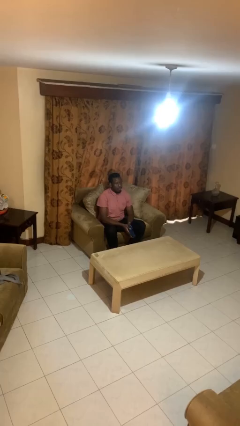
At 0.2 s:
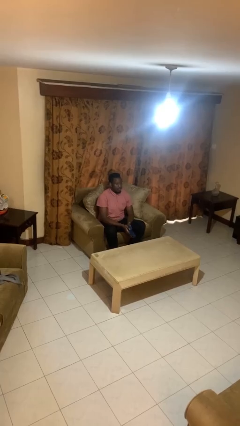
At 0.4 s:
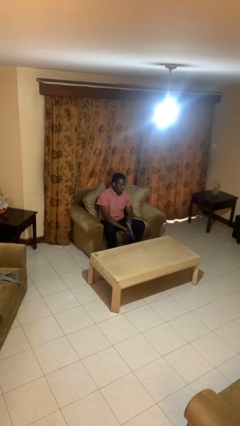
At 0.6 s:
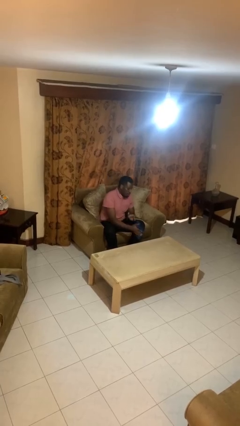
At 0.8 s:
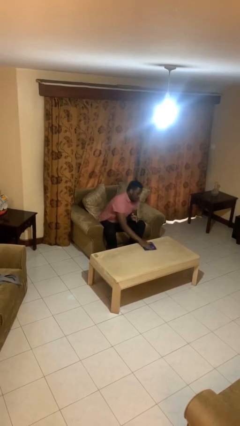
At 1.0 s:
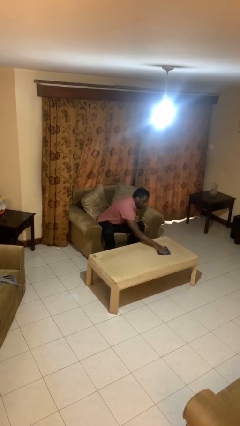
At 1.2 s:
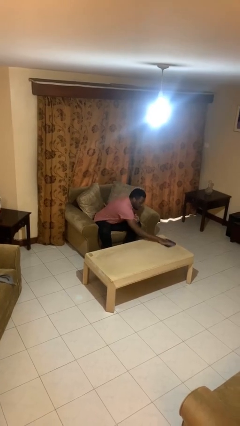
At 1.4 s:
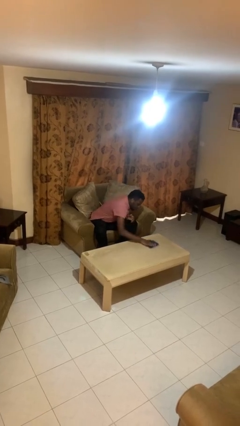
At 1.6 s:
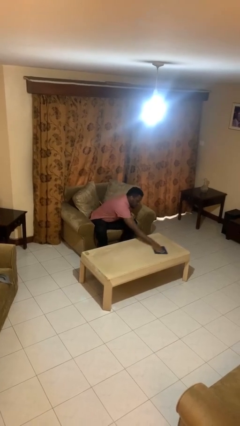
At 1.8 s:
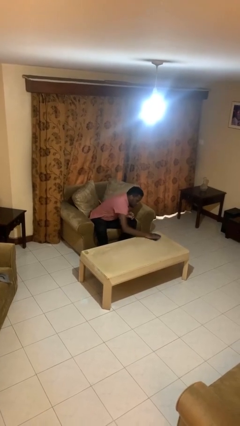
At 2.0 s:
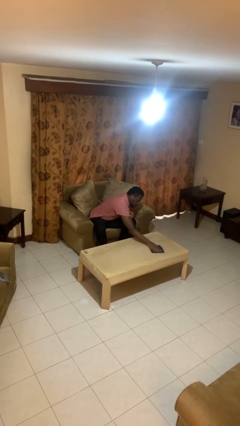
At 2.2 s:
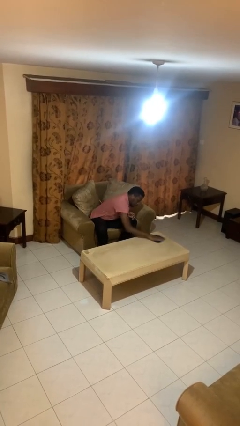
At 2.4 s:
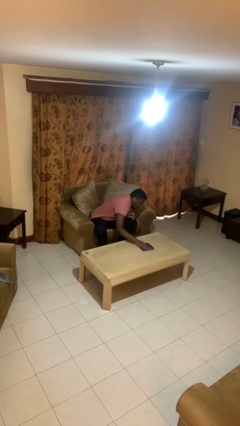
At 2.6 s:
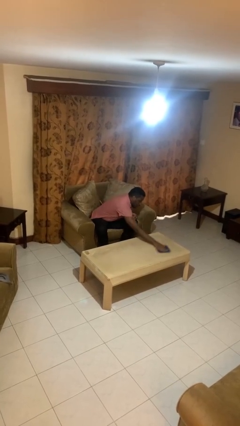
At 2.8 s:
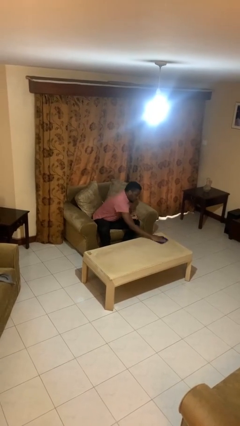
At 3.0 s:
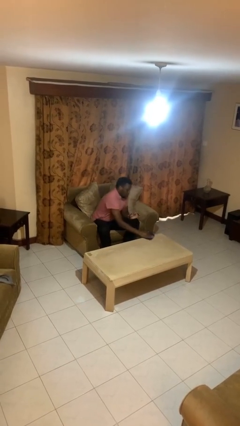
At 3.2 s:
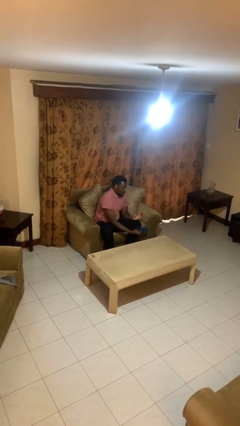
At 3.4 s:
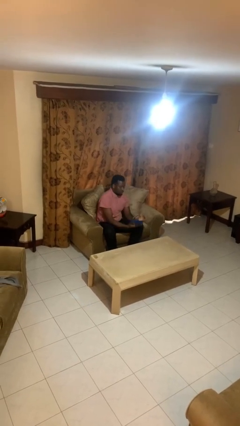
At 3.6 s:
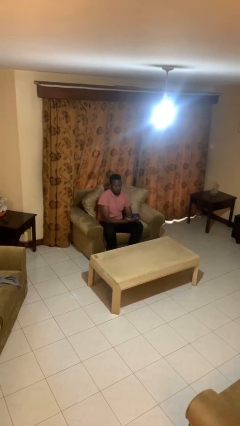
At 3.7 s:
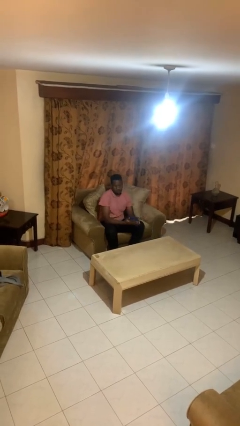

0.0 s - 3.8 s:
person cleans table with rag

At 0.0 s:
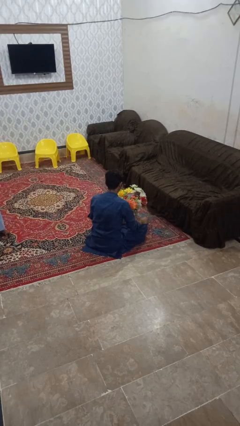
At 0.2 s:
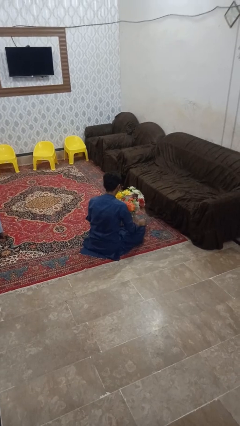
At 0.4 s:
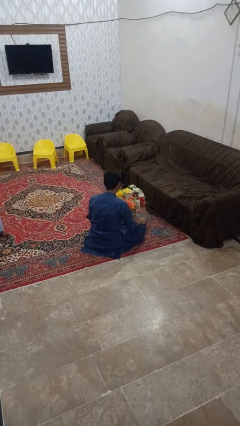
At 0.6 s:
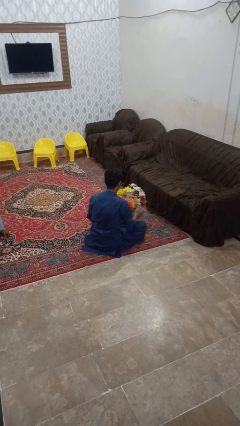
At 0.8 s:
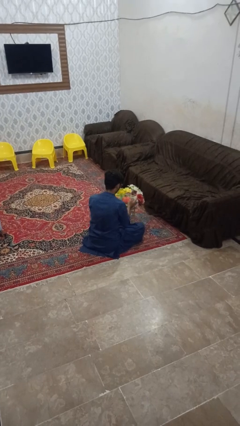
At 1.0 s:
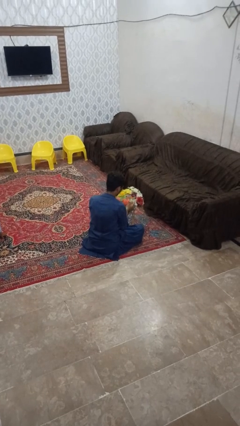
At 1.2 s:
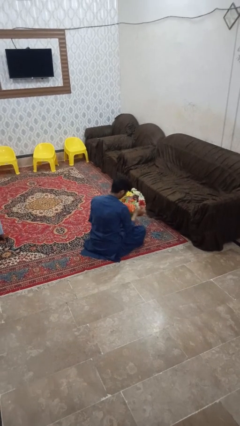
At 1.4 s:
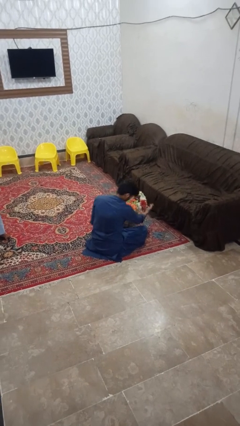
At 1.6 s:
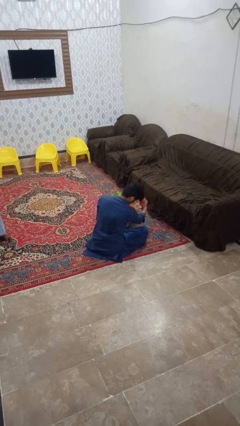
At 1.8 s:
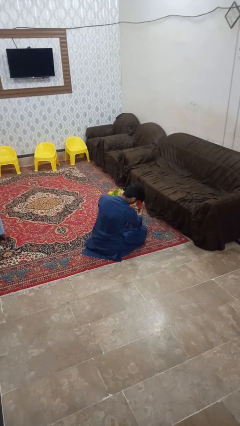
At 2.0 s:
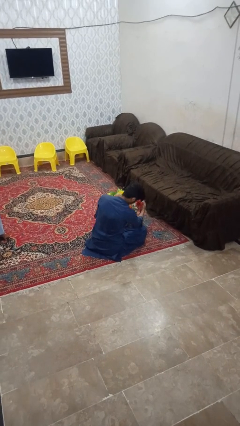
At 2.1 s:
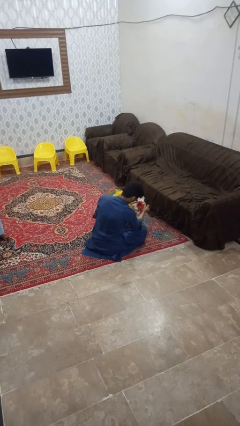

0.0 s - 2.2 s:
person arranges flowers in vase

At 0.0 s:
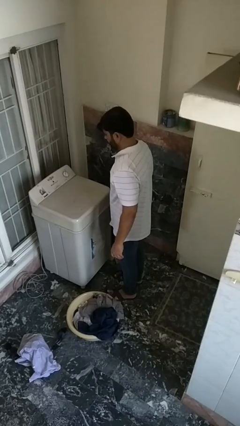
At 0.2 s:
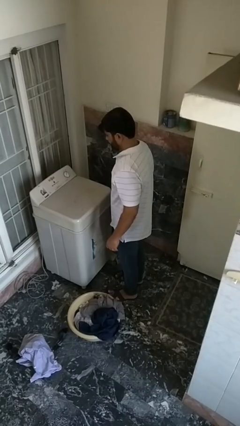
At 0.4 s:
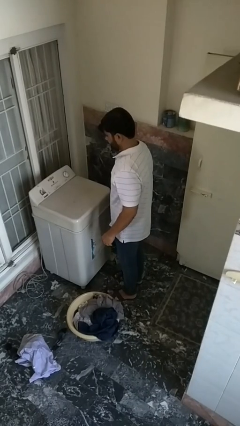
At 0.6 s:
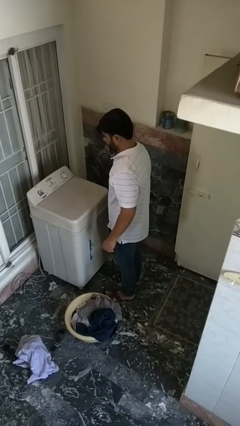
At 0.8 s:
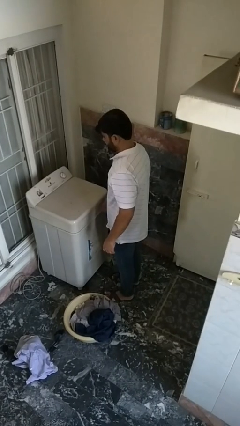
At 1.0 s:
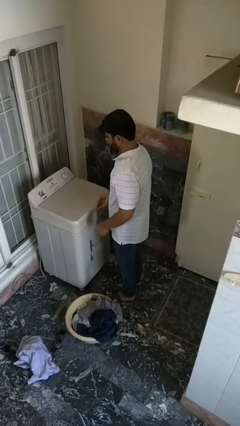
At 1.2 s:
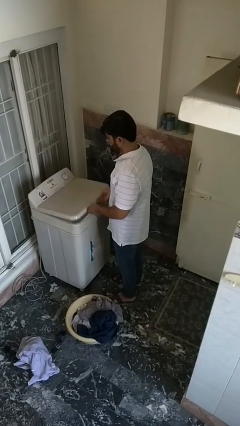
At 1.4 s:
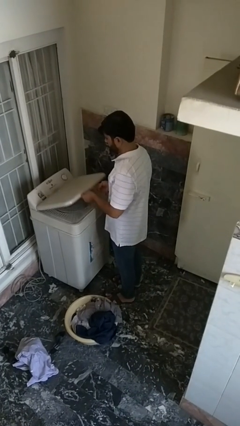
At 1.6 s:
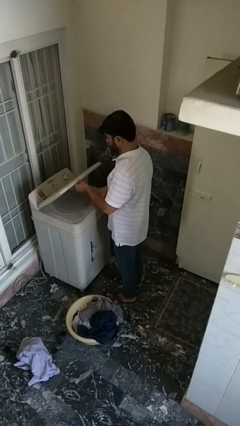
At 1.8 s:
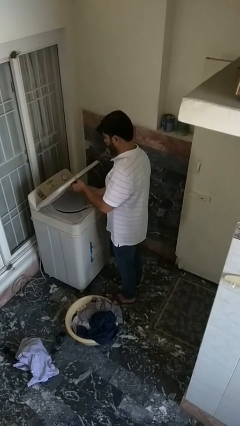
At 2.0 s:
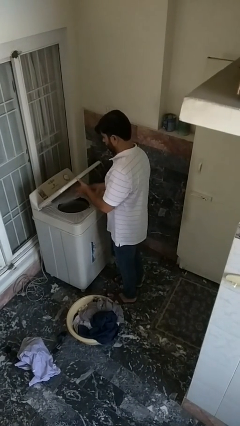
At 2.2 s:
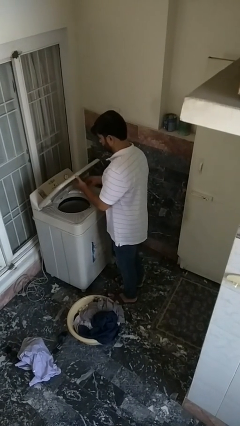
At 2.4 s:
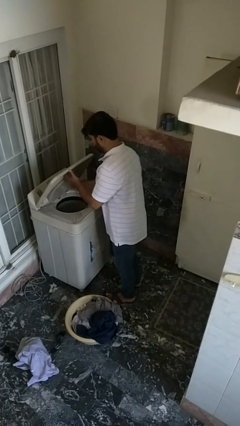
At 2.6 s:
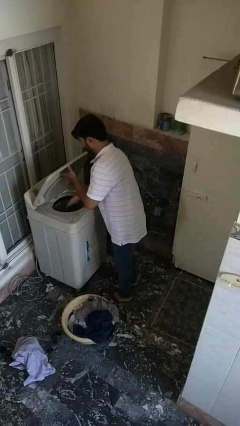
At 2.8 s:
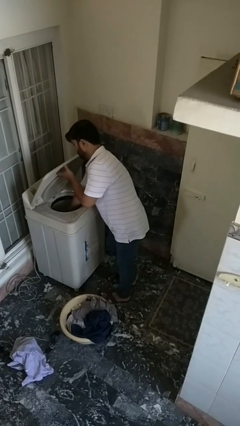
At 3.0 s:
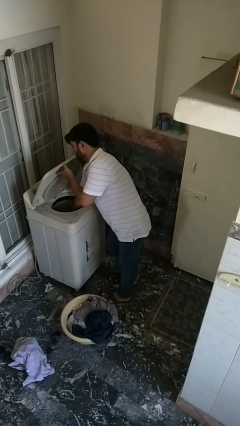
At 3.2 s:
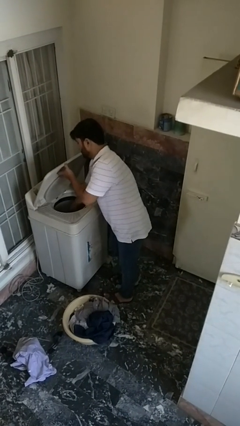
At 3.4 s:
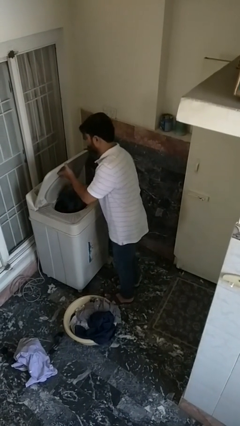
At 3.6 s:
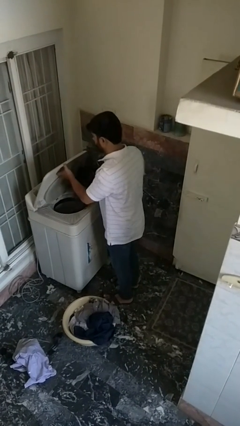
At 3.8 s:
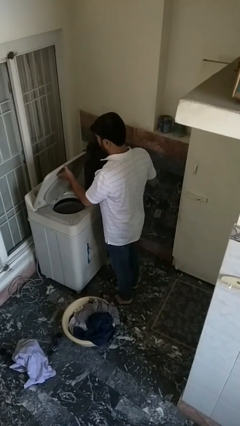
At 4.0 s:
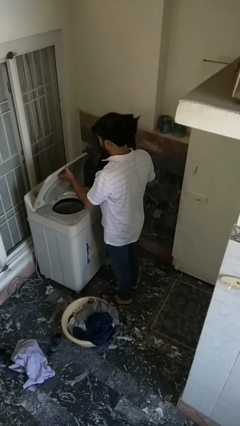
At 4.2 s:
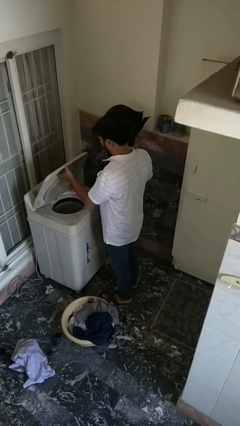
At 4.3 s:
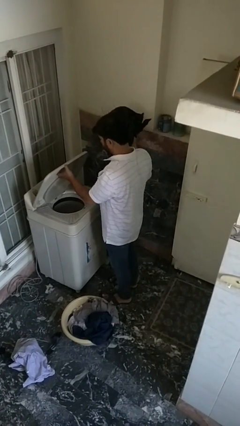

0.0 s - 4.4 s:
person unloads dryer

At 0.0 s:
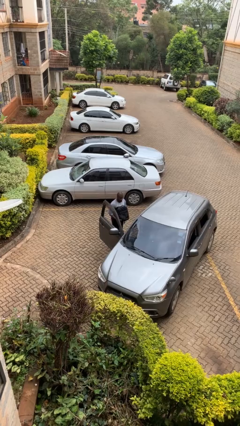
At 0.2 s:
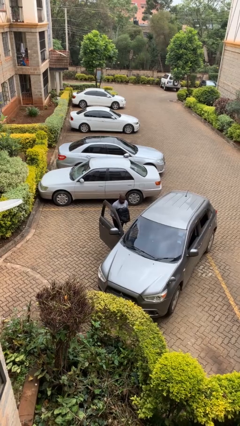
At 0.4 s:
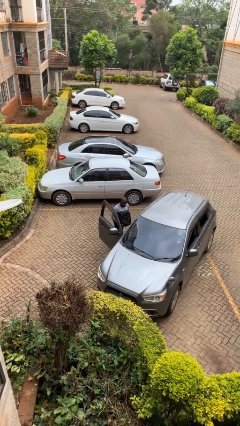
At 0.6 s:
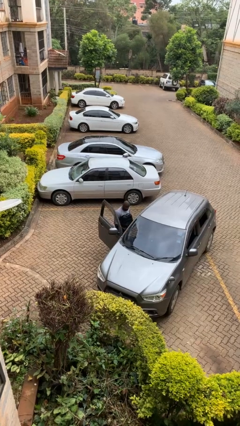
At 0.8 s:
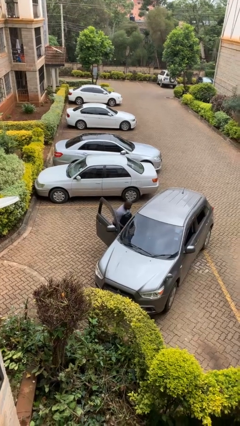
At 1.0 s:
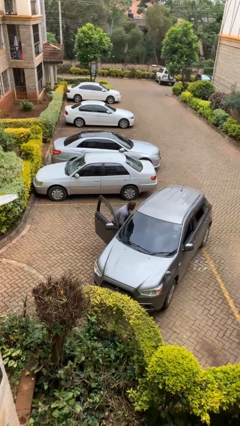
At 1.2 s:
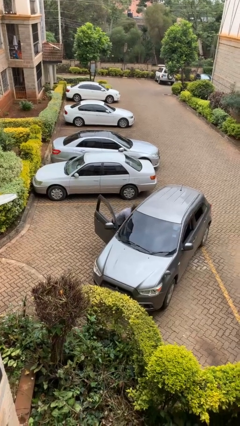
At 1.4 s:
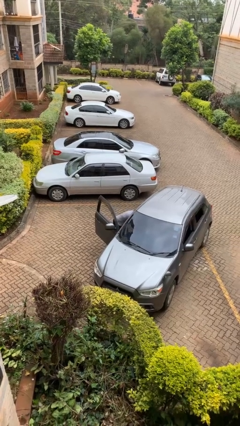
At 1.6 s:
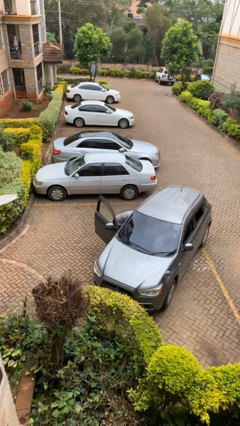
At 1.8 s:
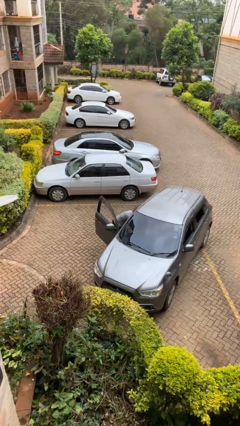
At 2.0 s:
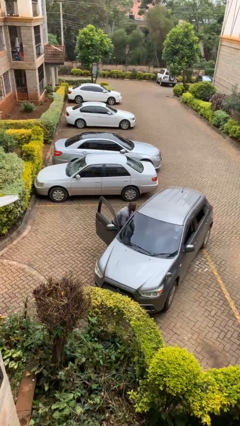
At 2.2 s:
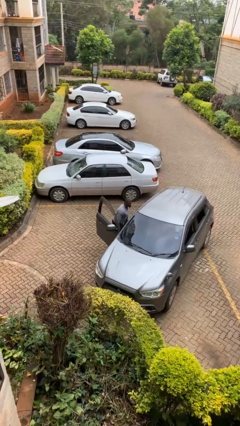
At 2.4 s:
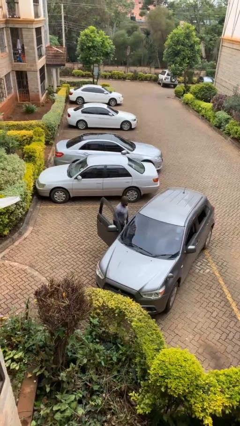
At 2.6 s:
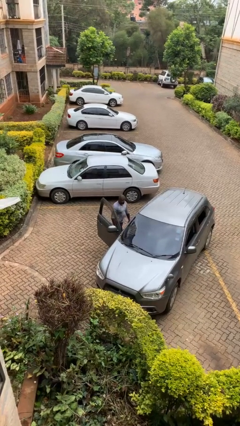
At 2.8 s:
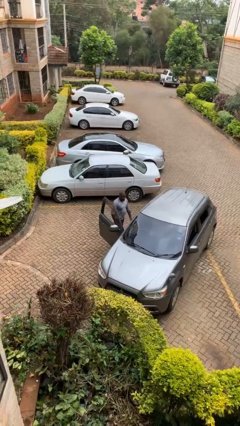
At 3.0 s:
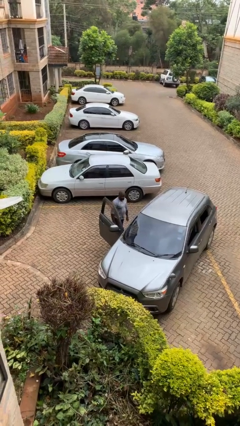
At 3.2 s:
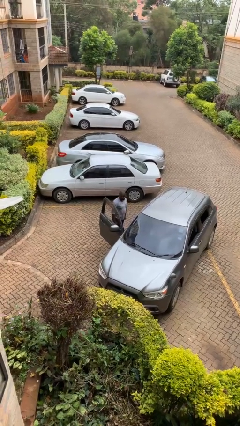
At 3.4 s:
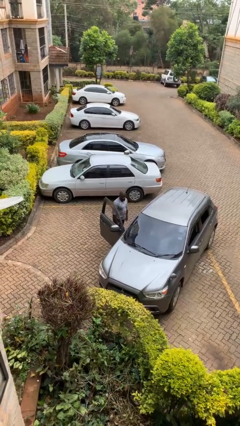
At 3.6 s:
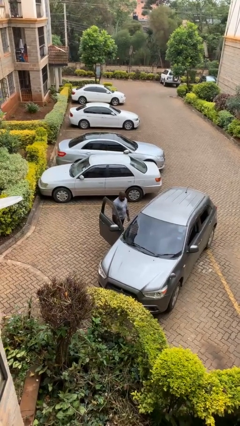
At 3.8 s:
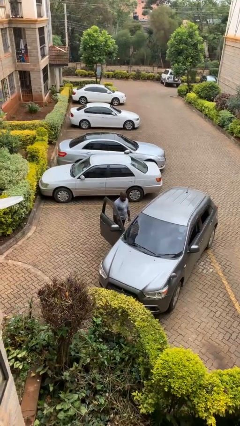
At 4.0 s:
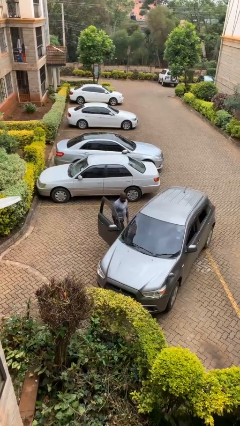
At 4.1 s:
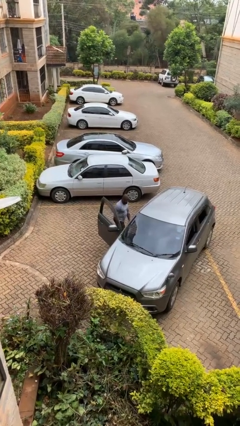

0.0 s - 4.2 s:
person loads car

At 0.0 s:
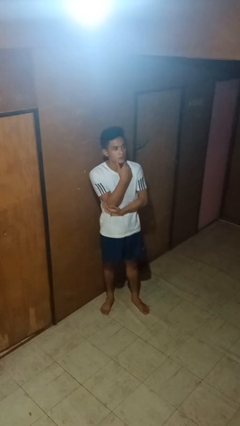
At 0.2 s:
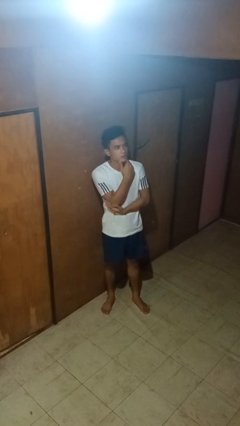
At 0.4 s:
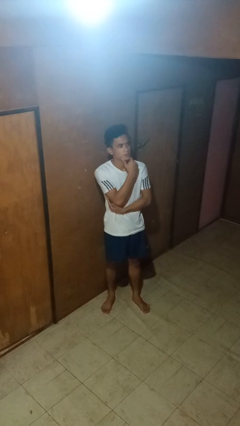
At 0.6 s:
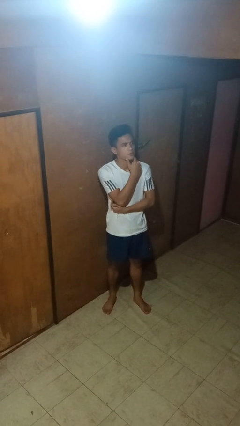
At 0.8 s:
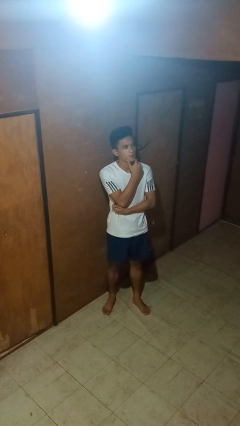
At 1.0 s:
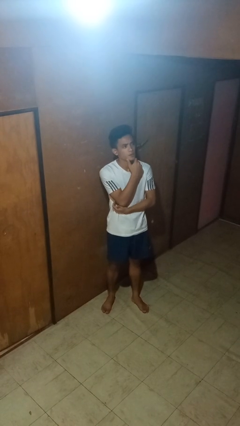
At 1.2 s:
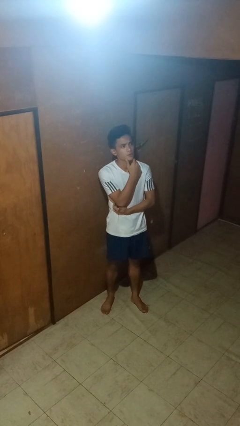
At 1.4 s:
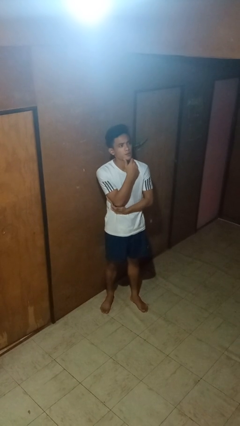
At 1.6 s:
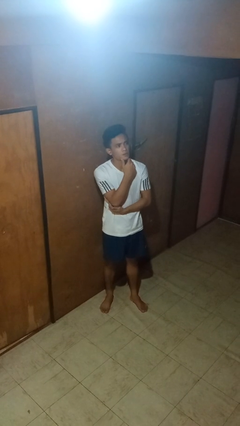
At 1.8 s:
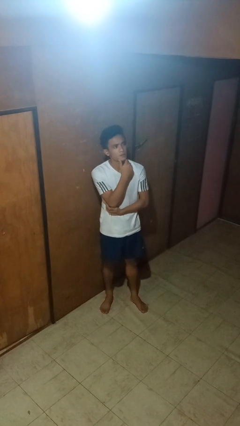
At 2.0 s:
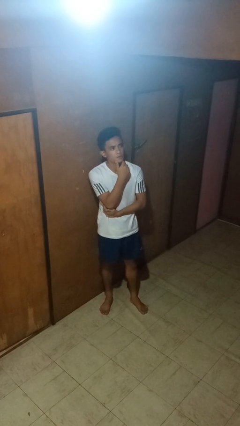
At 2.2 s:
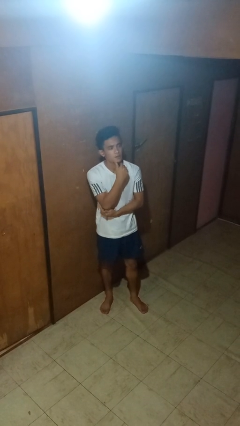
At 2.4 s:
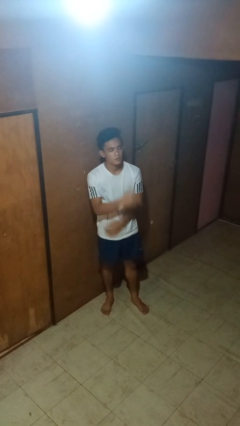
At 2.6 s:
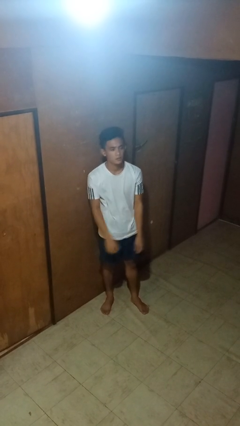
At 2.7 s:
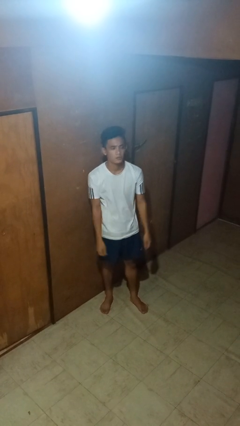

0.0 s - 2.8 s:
person strokes chin
